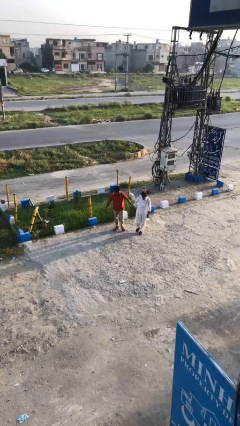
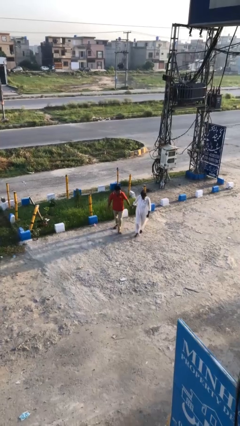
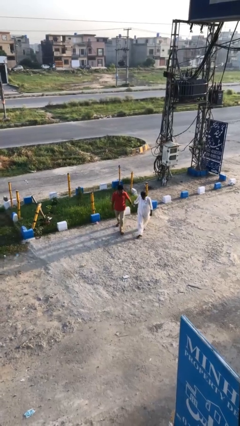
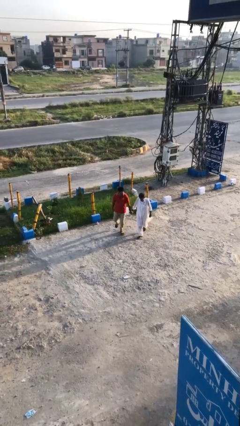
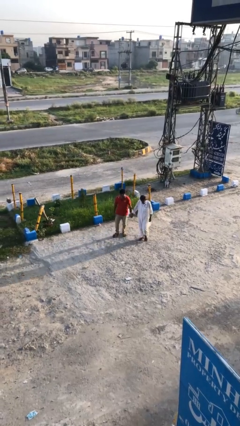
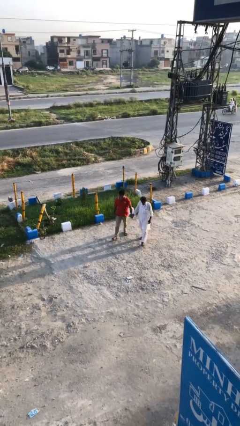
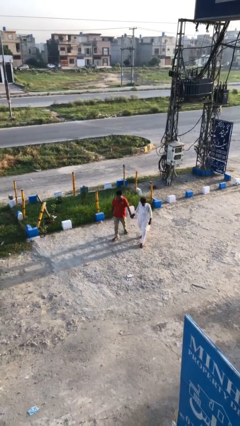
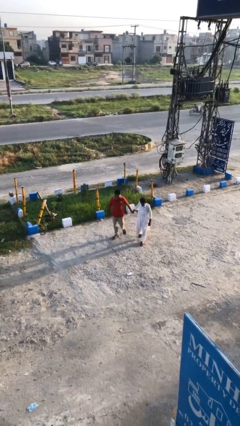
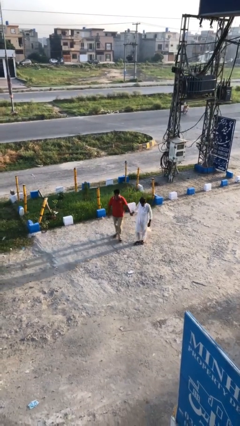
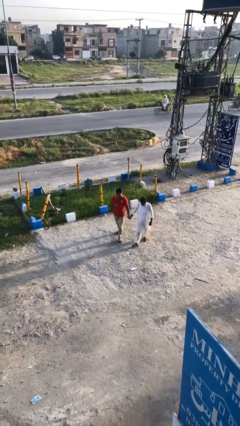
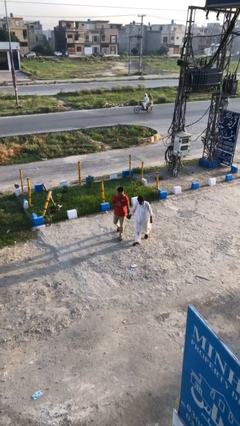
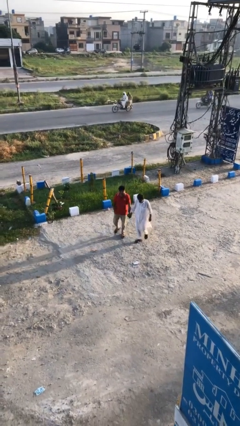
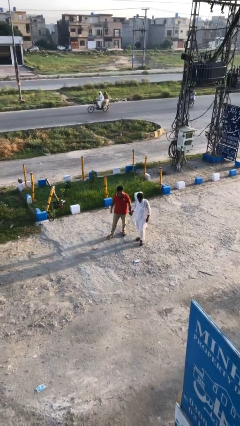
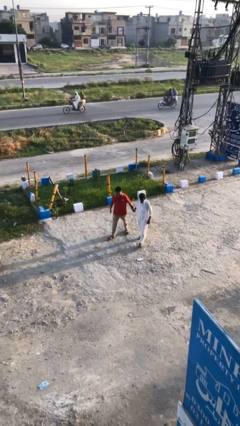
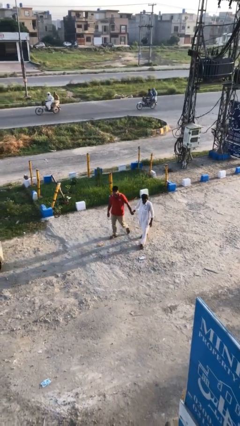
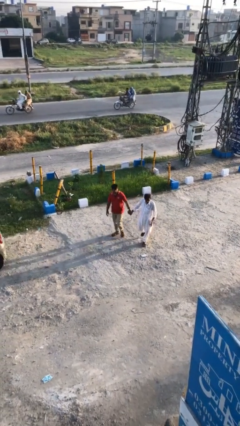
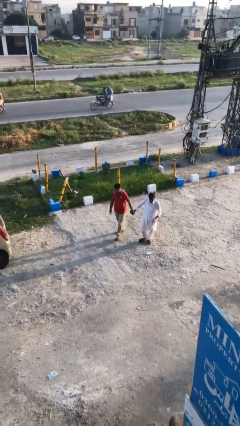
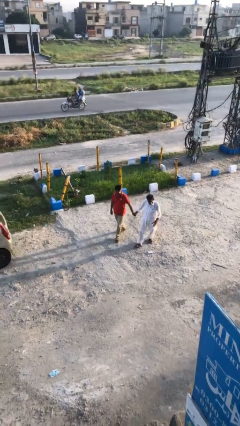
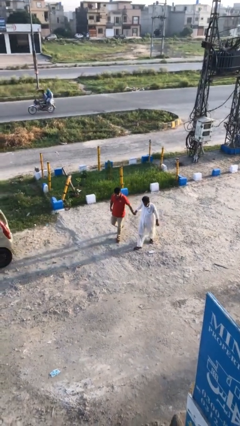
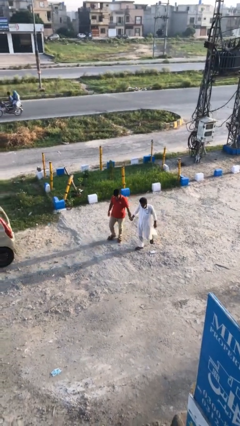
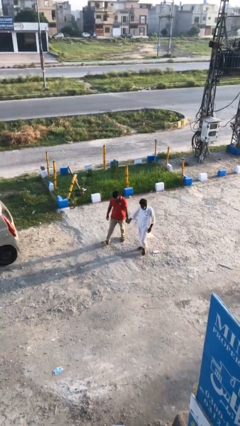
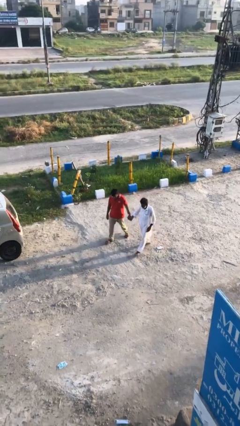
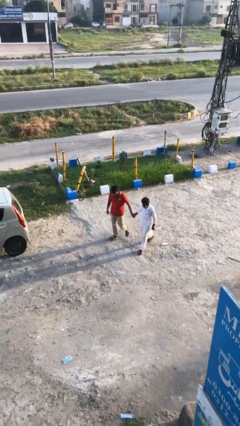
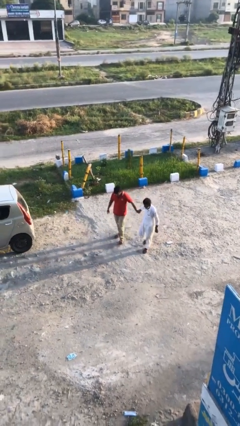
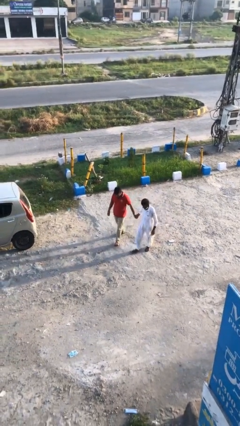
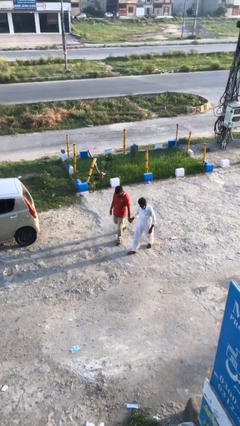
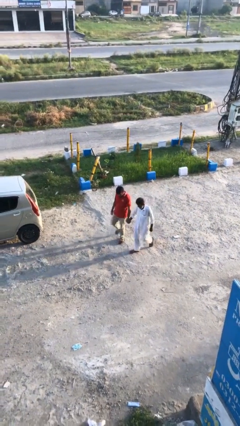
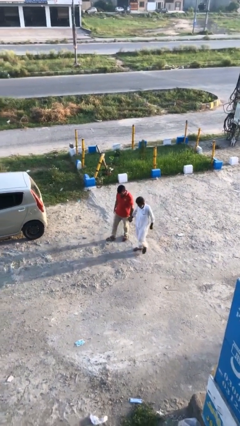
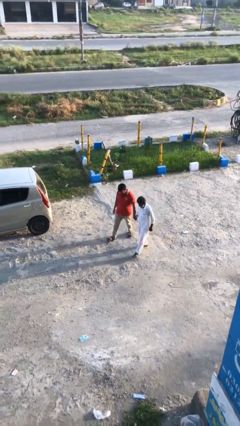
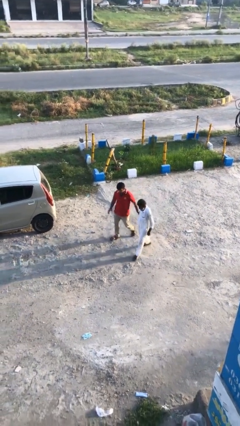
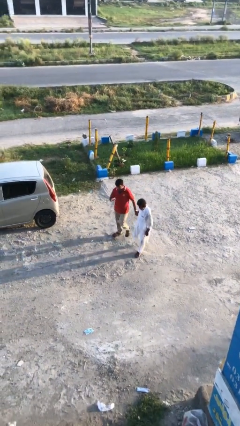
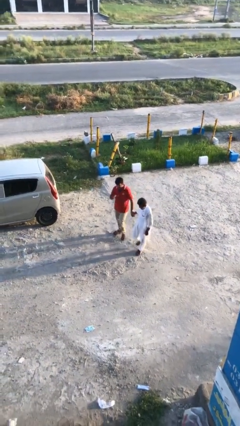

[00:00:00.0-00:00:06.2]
person holds hand

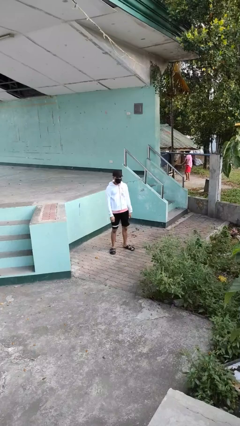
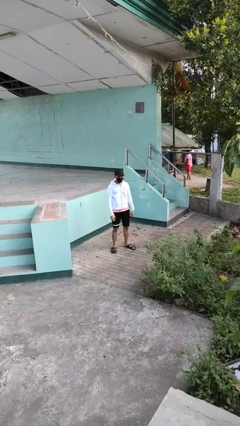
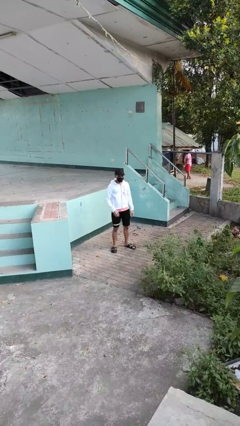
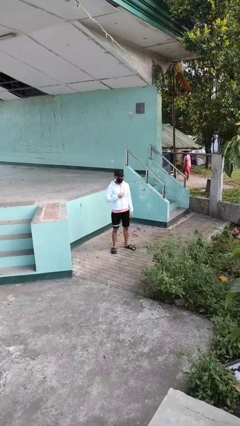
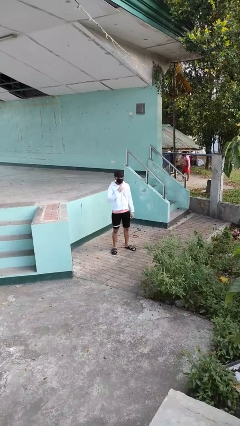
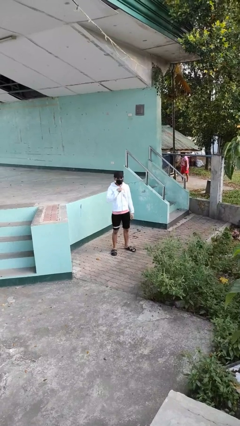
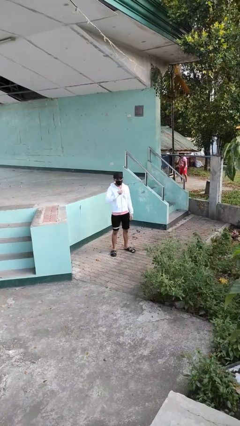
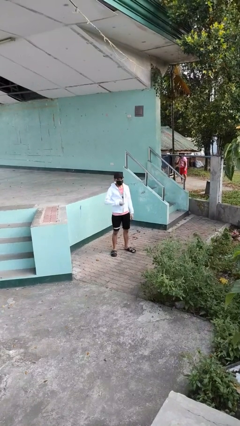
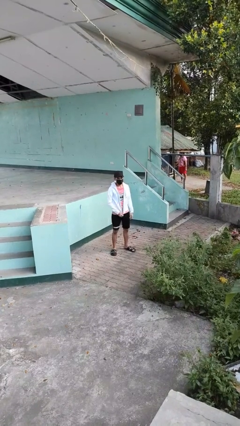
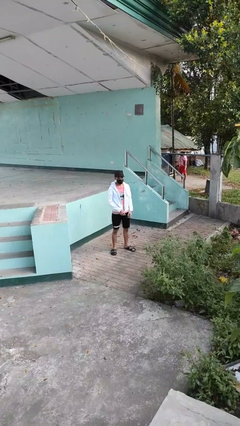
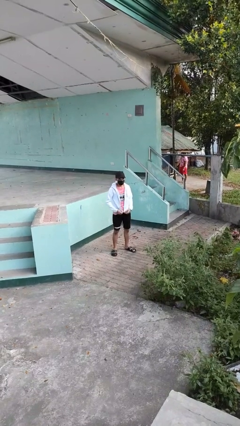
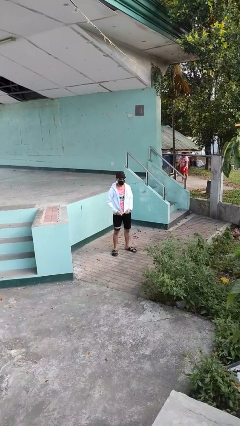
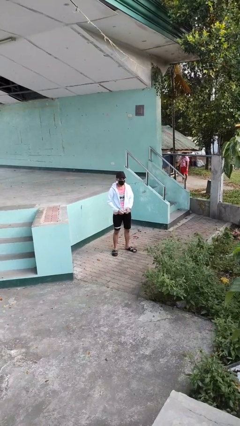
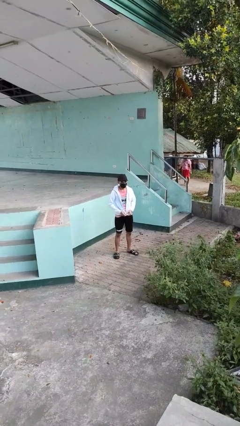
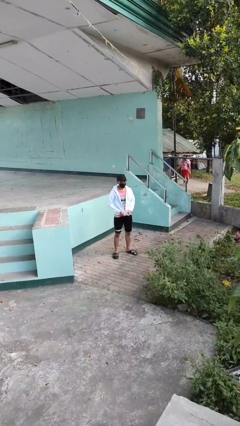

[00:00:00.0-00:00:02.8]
person unzips jacket

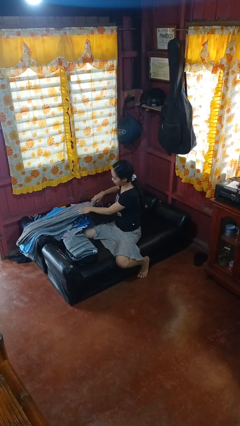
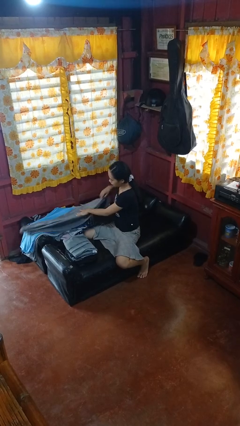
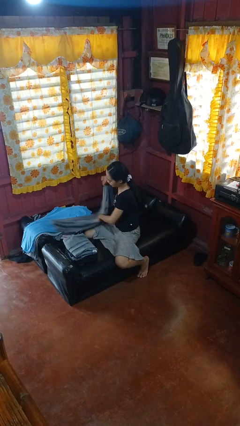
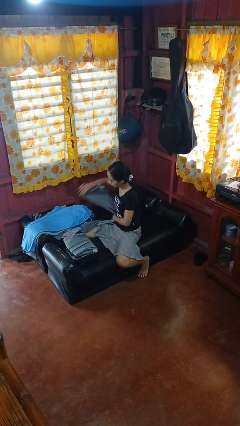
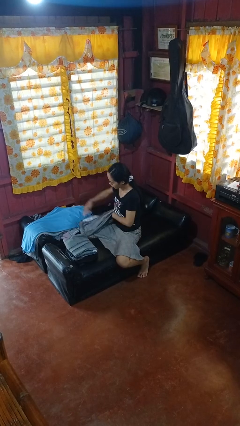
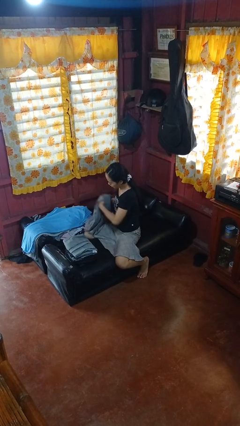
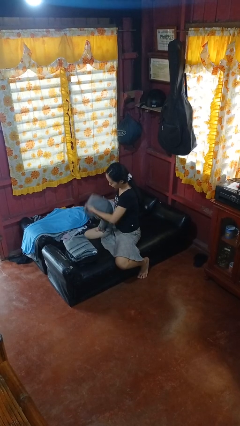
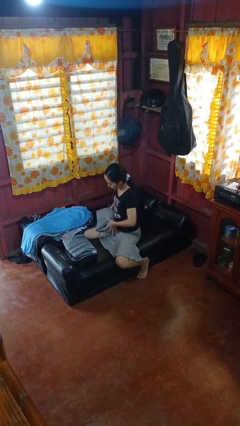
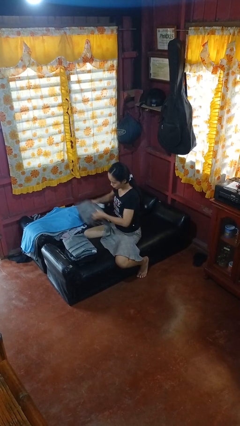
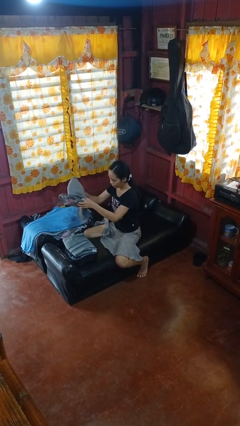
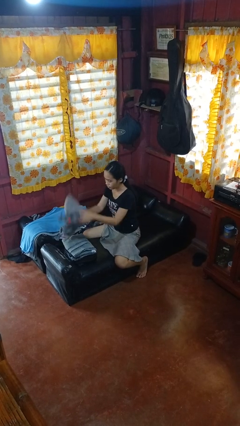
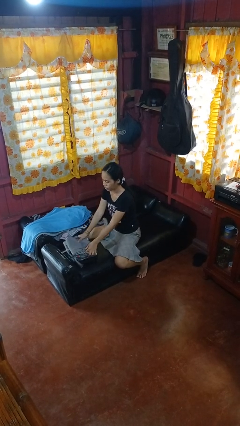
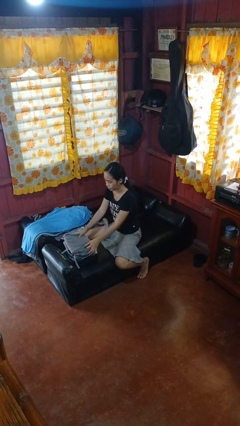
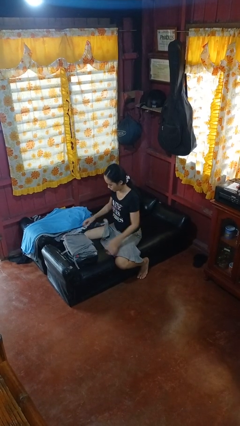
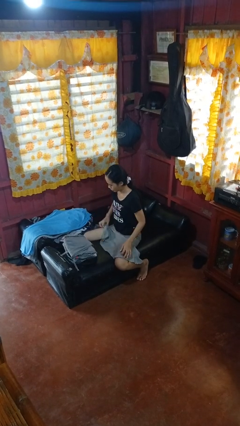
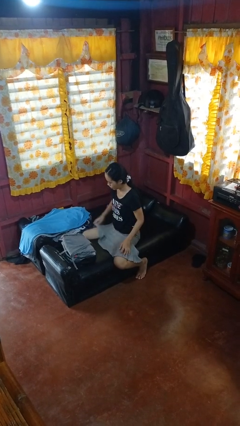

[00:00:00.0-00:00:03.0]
person folds pants

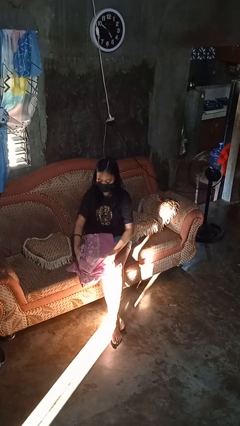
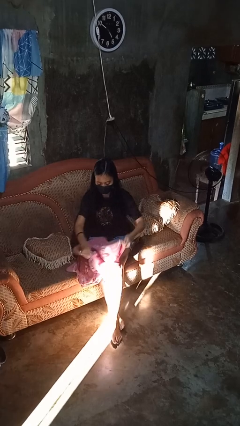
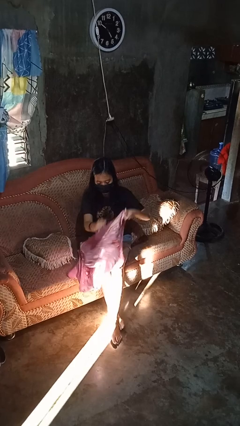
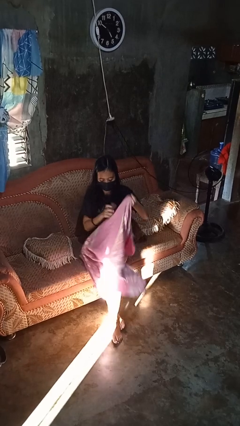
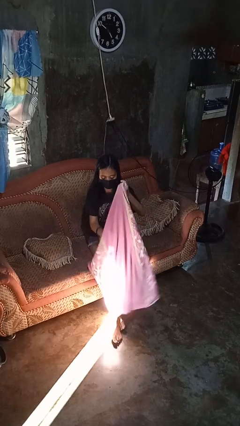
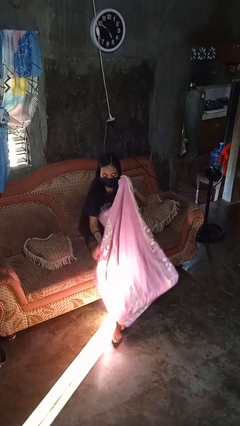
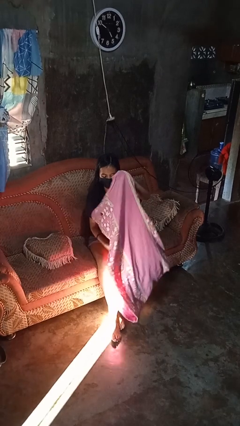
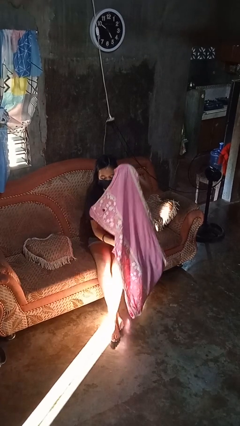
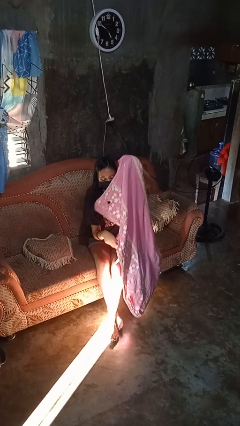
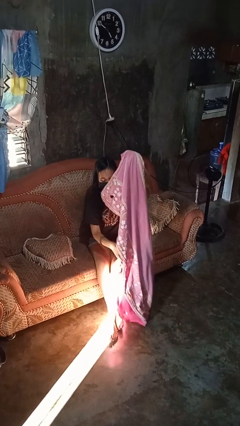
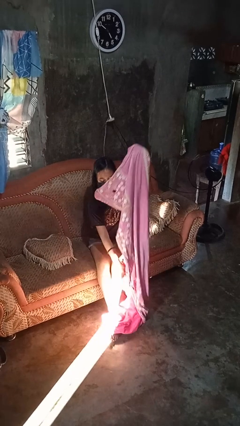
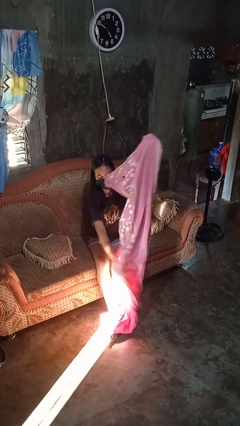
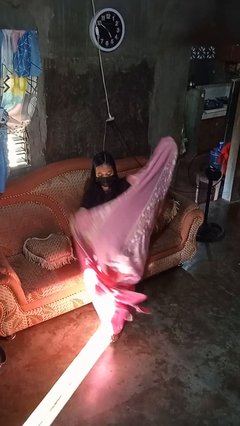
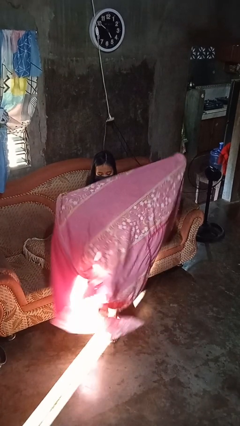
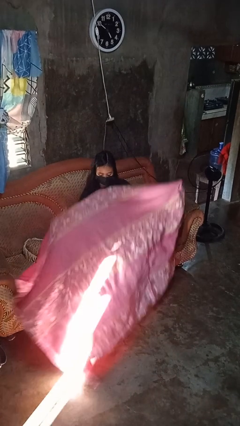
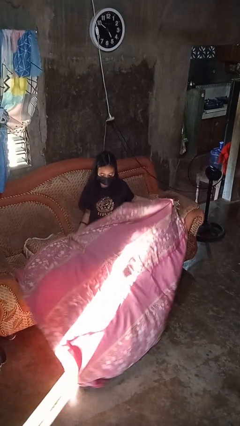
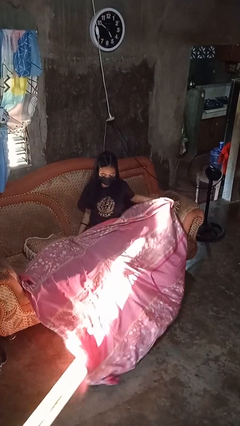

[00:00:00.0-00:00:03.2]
person unfolds blanket

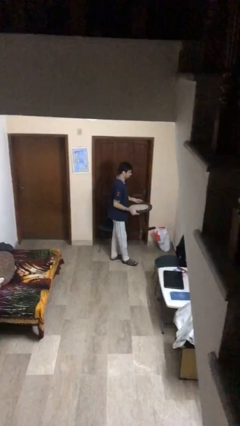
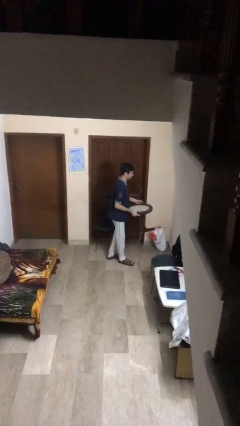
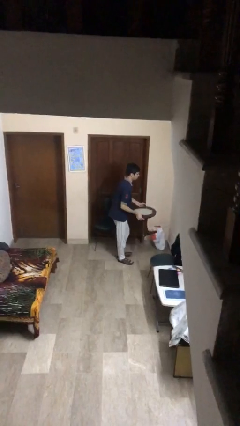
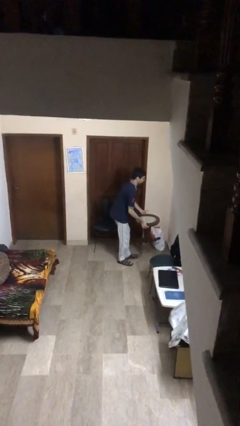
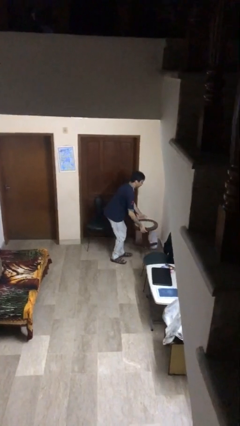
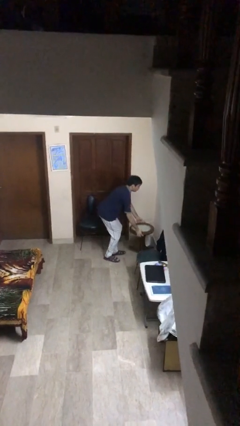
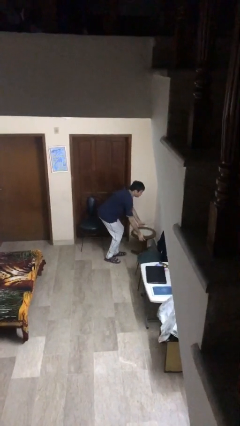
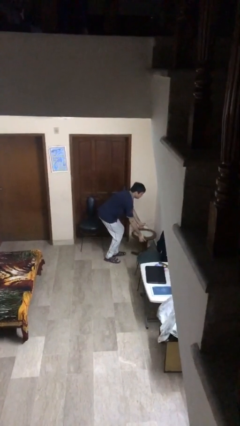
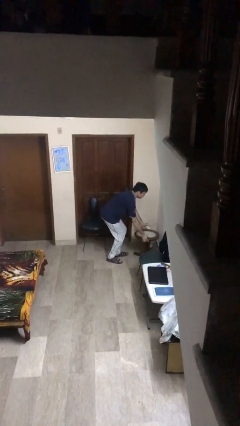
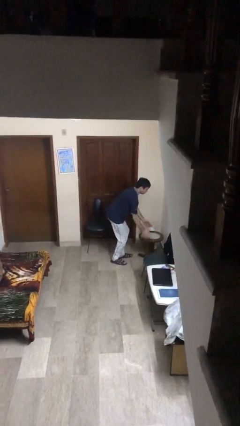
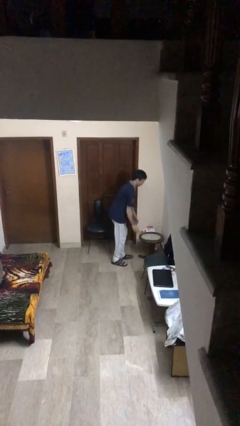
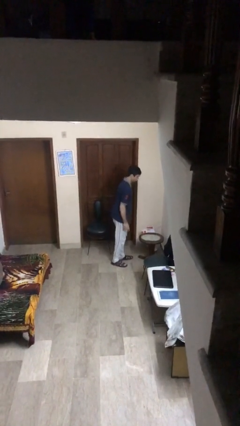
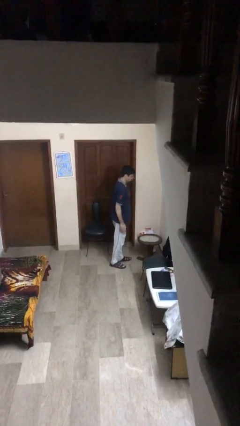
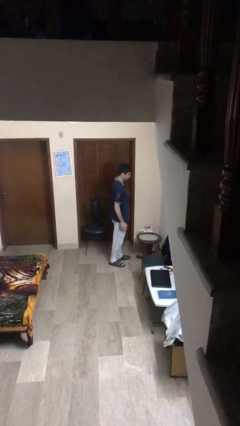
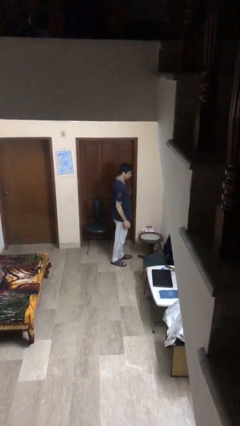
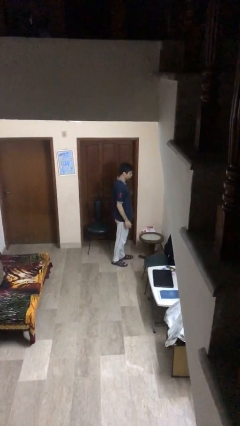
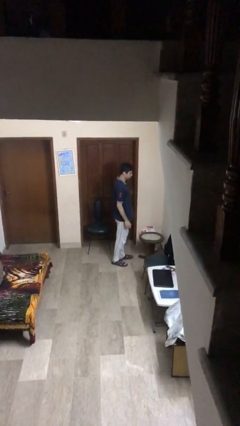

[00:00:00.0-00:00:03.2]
person puts down object on floor
